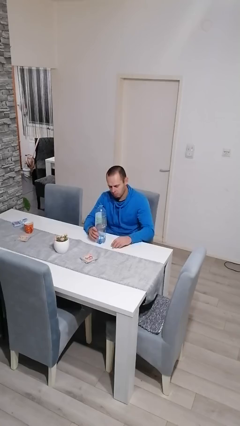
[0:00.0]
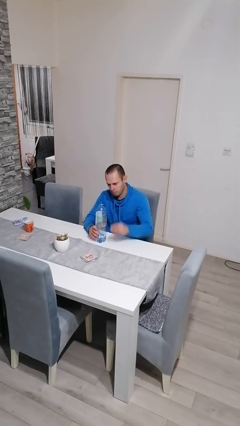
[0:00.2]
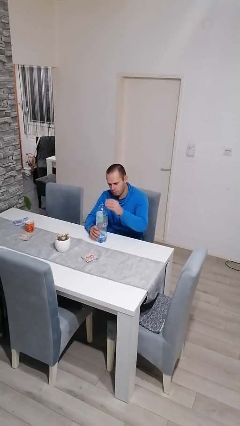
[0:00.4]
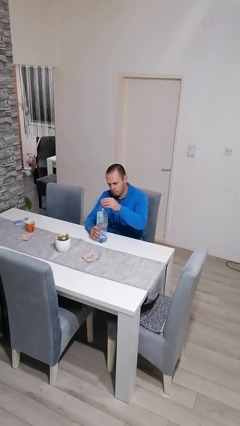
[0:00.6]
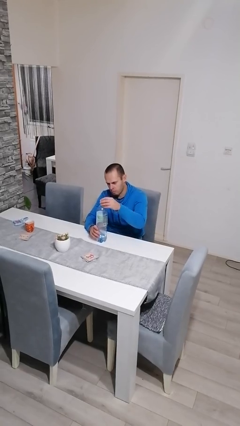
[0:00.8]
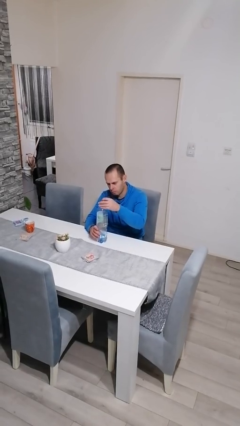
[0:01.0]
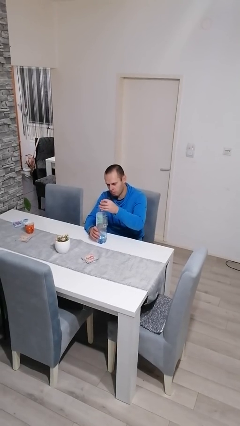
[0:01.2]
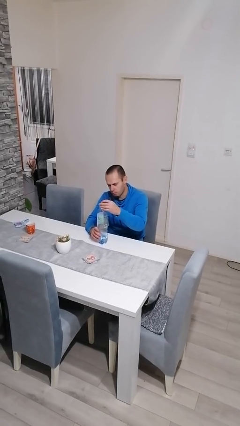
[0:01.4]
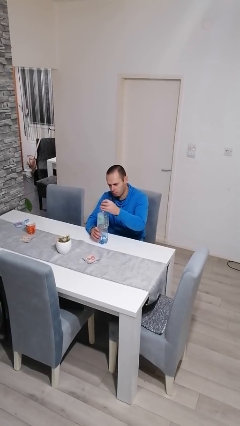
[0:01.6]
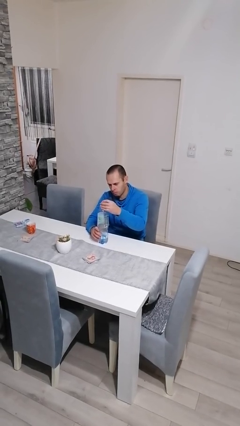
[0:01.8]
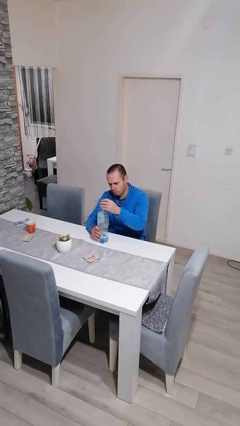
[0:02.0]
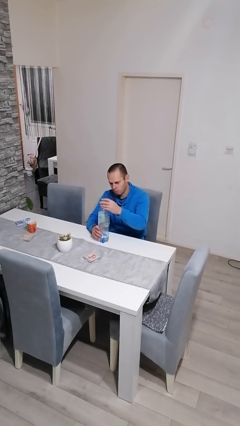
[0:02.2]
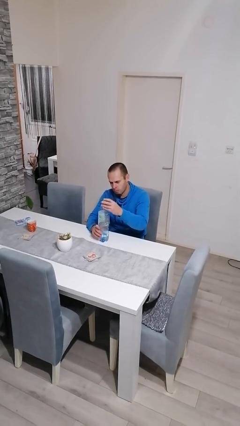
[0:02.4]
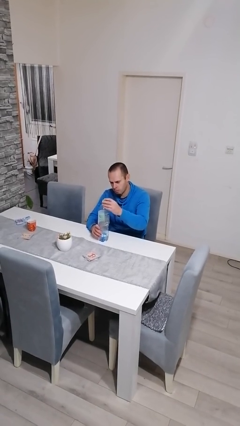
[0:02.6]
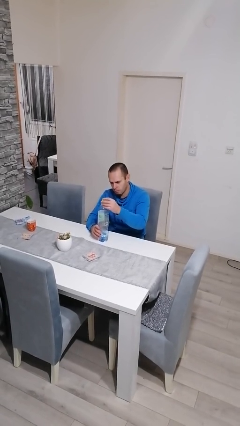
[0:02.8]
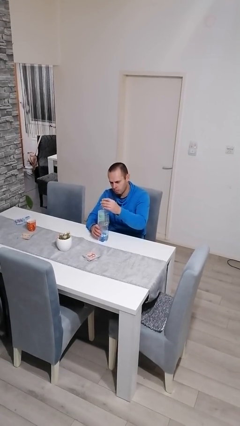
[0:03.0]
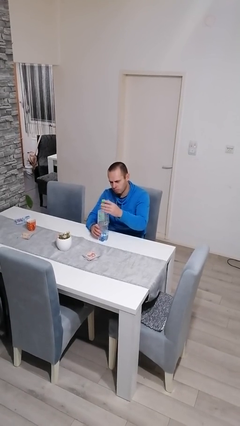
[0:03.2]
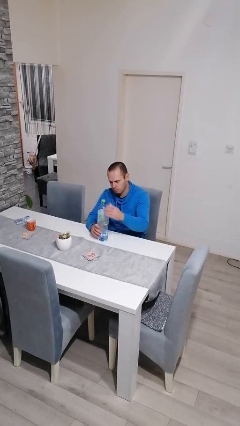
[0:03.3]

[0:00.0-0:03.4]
person screws lid to bottle

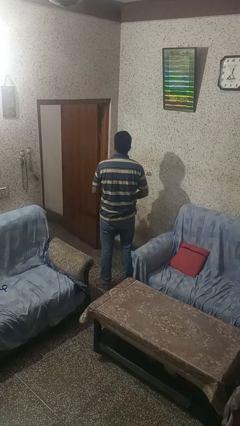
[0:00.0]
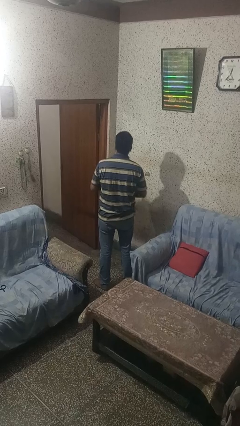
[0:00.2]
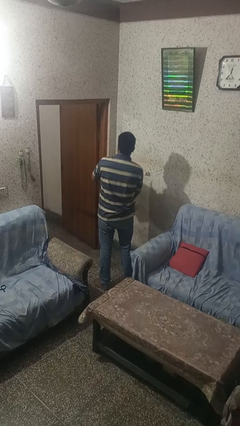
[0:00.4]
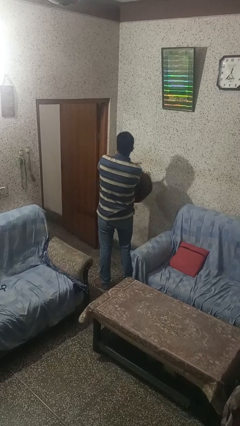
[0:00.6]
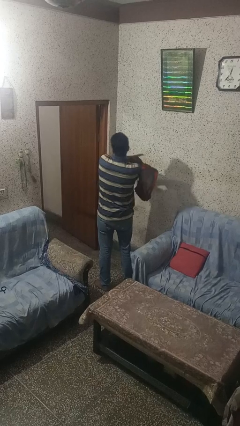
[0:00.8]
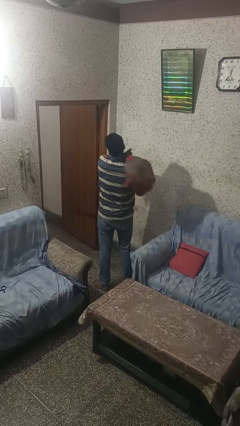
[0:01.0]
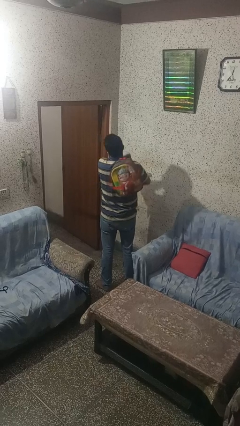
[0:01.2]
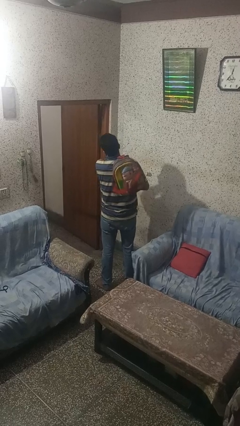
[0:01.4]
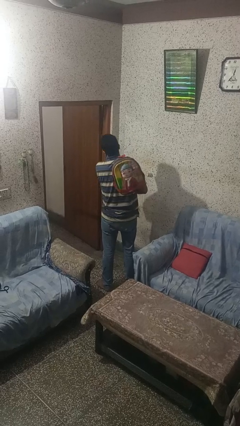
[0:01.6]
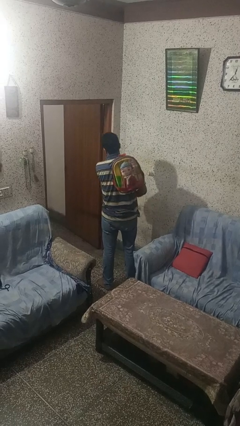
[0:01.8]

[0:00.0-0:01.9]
person puts on backpack

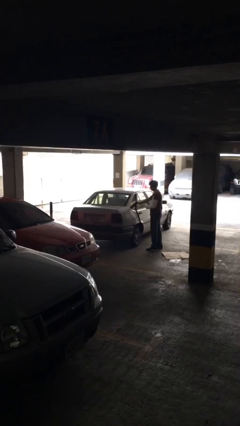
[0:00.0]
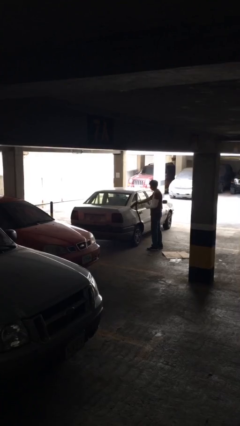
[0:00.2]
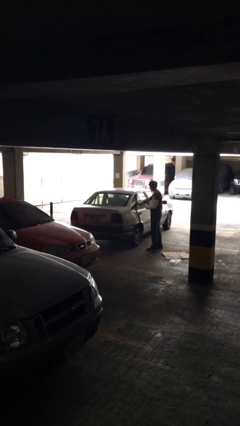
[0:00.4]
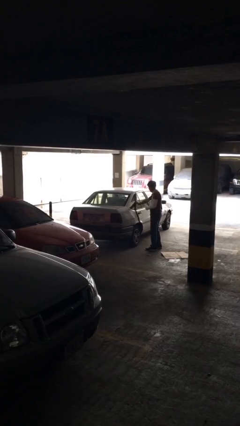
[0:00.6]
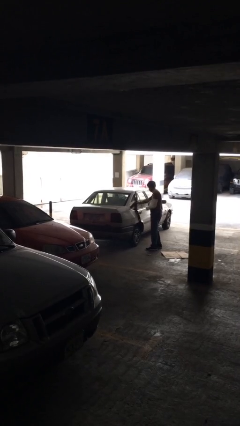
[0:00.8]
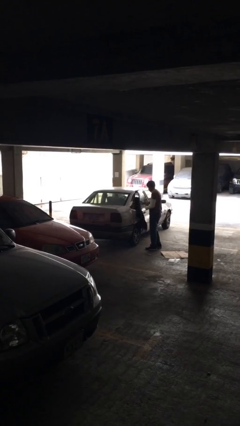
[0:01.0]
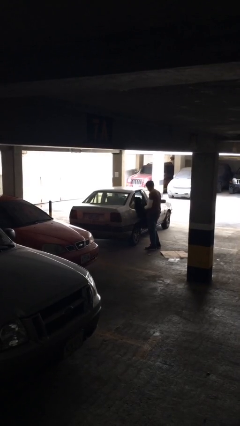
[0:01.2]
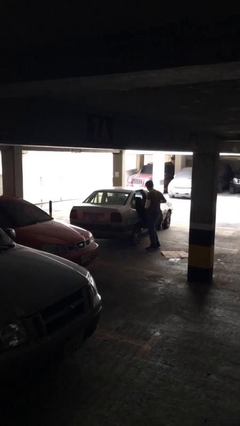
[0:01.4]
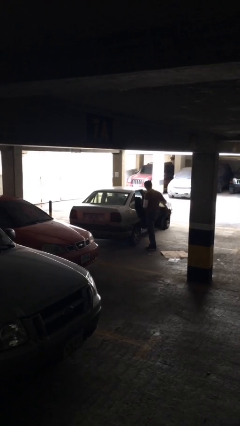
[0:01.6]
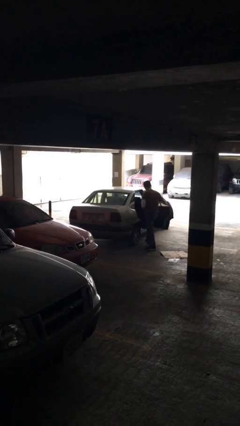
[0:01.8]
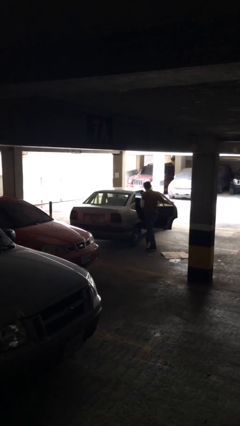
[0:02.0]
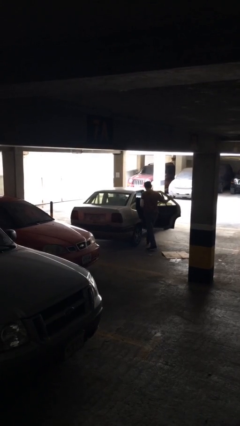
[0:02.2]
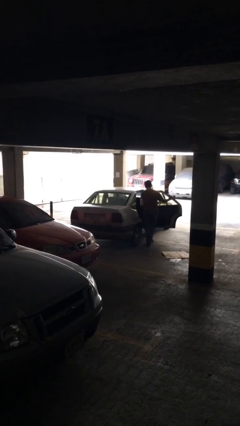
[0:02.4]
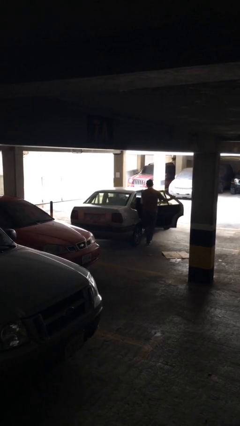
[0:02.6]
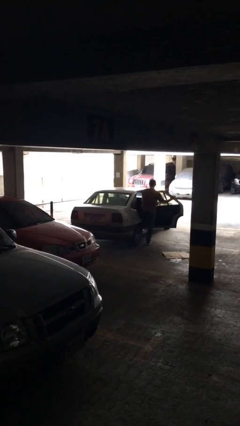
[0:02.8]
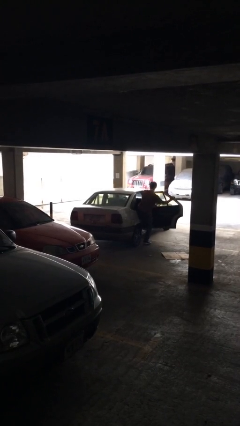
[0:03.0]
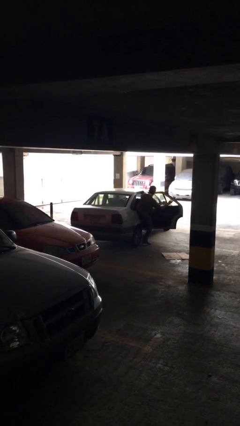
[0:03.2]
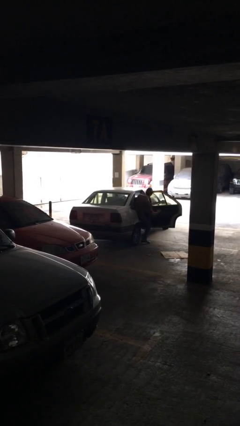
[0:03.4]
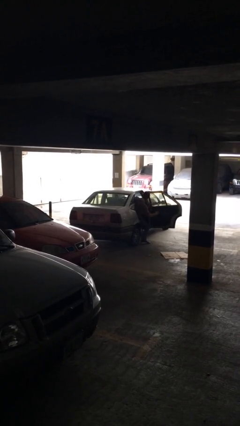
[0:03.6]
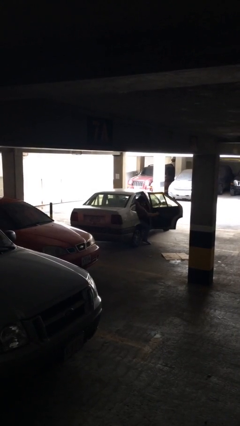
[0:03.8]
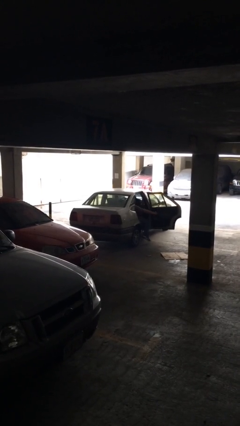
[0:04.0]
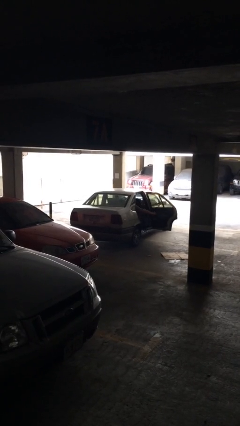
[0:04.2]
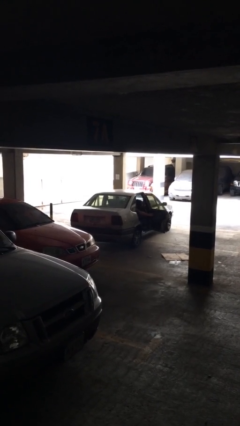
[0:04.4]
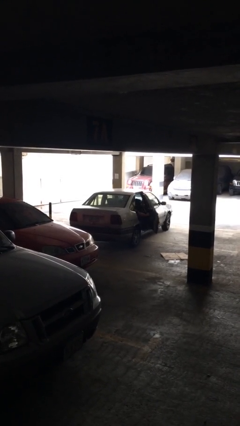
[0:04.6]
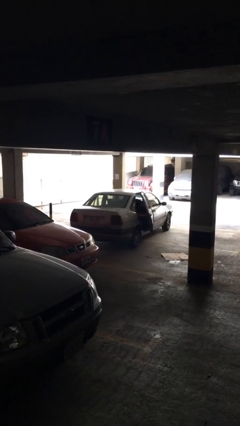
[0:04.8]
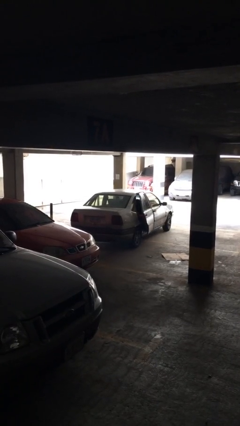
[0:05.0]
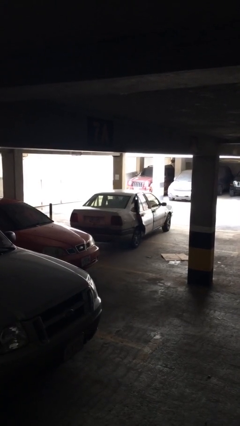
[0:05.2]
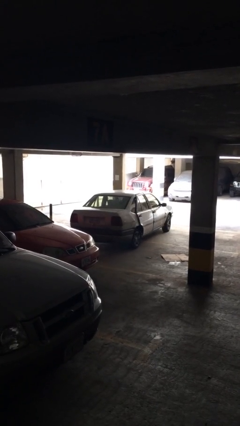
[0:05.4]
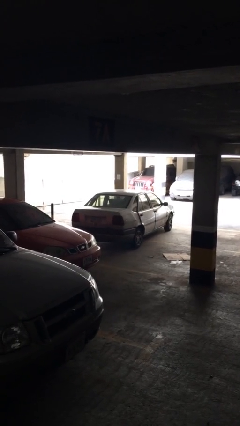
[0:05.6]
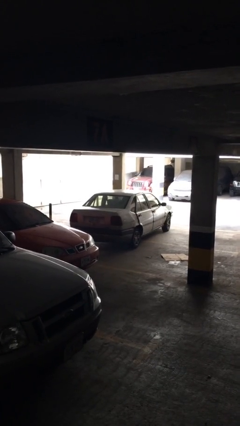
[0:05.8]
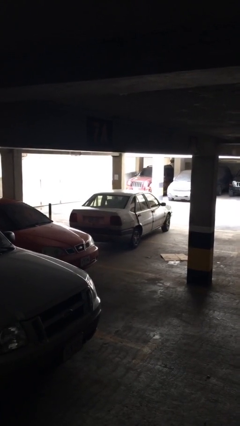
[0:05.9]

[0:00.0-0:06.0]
car picks up person

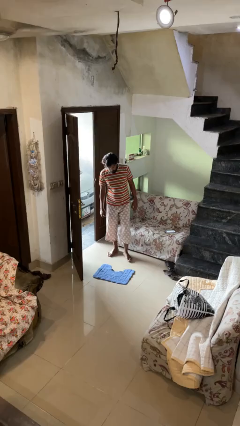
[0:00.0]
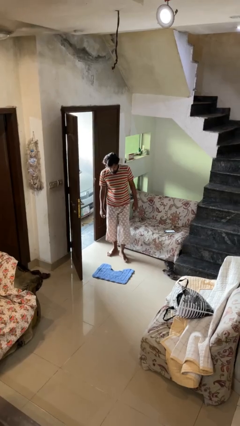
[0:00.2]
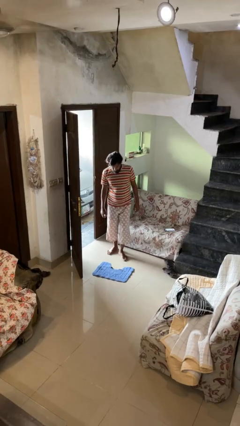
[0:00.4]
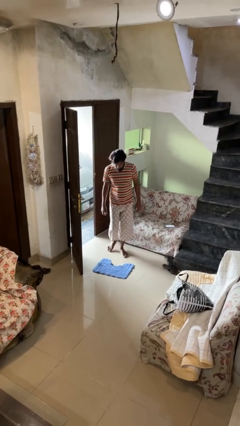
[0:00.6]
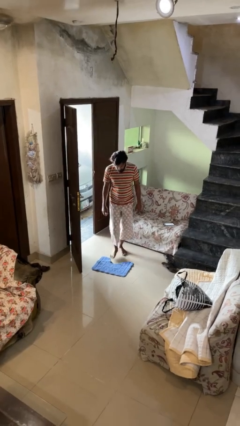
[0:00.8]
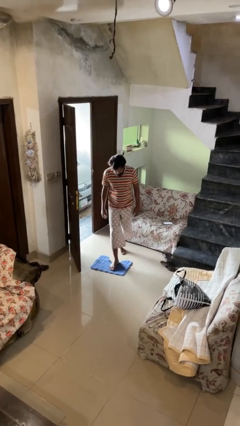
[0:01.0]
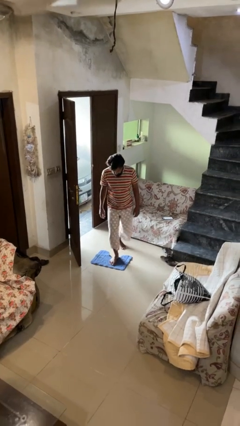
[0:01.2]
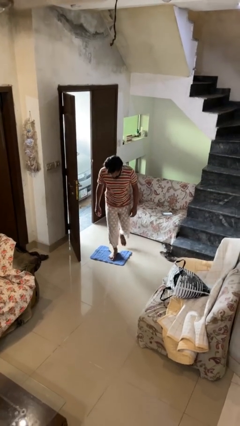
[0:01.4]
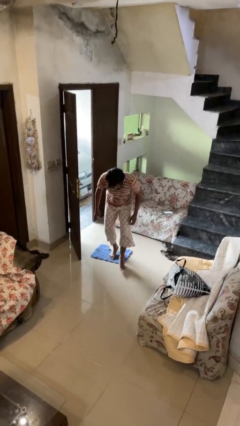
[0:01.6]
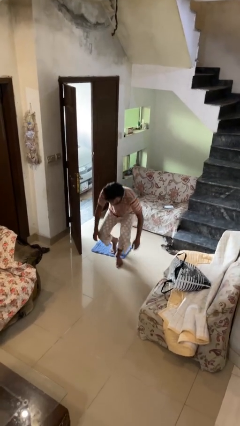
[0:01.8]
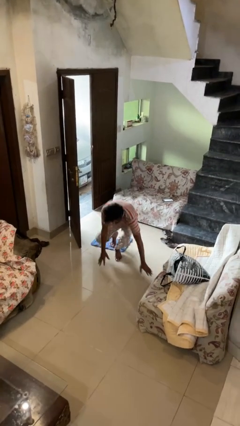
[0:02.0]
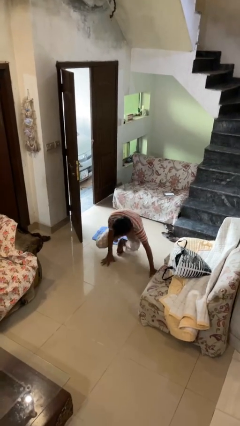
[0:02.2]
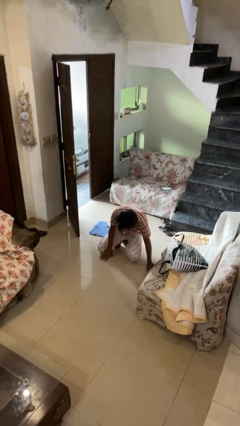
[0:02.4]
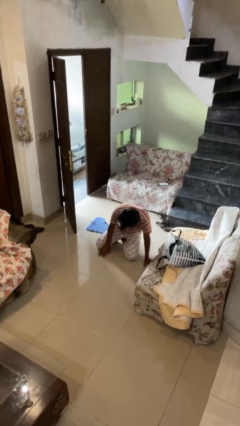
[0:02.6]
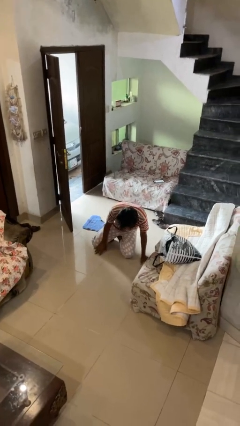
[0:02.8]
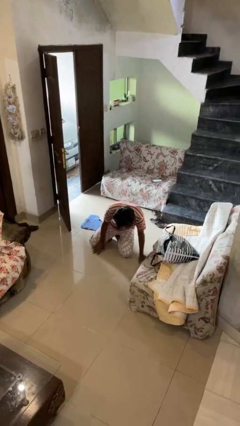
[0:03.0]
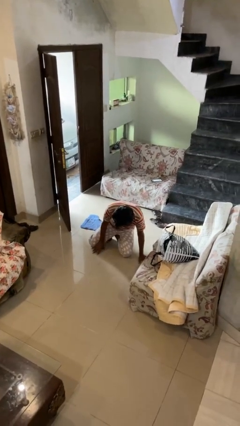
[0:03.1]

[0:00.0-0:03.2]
person trips on object on floor

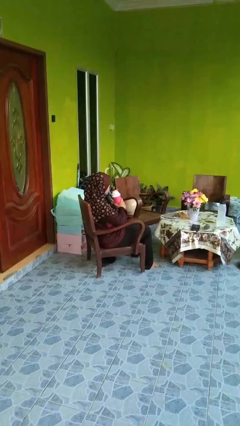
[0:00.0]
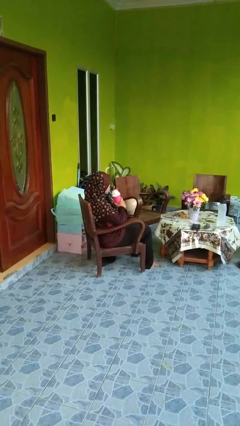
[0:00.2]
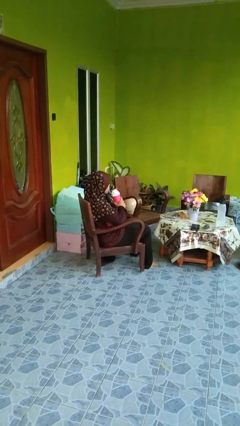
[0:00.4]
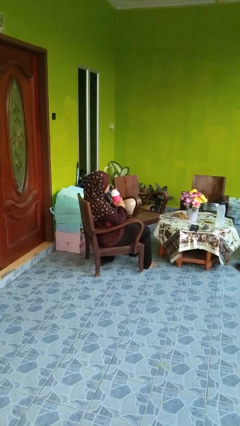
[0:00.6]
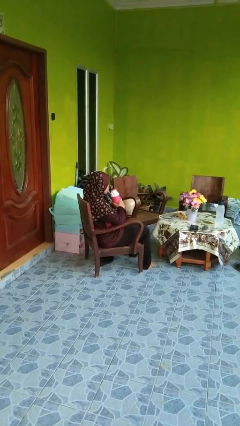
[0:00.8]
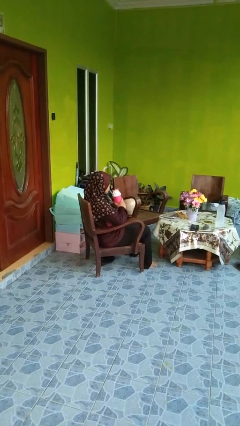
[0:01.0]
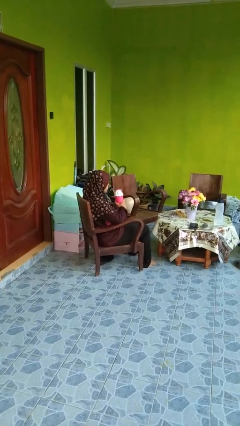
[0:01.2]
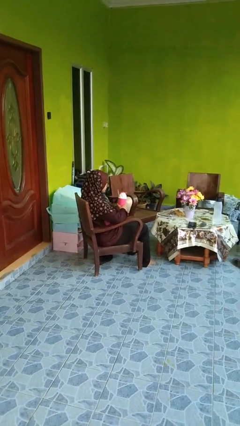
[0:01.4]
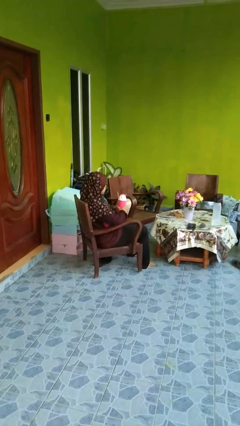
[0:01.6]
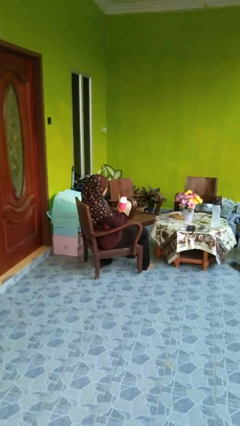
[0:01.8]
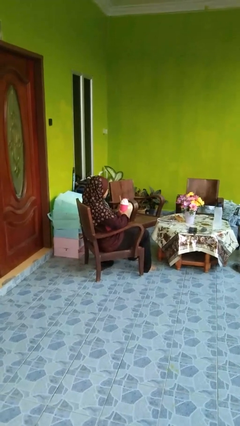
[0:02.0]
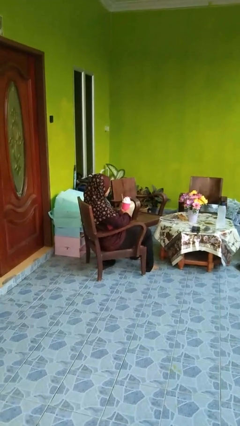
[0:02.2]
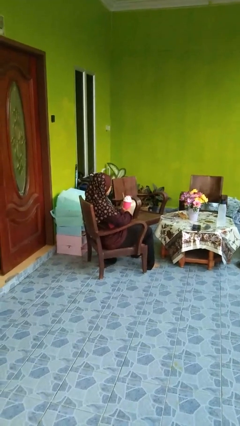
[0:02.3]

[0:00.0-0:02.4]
person drinks from straw

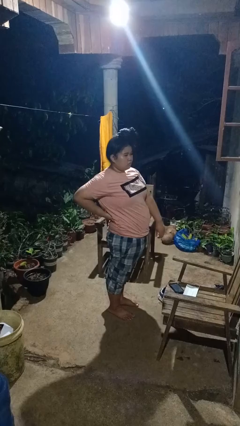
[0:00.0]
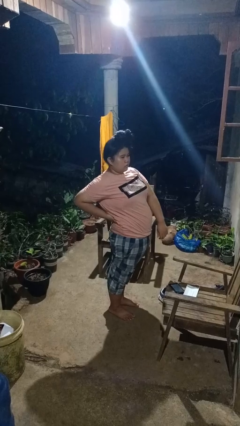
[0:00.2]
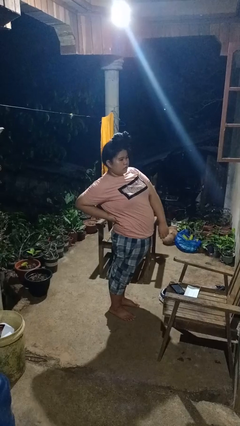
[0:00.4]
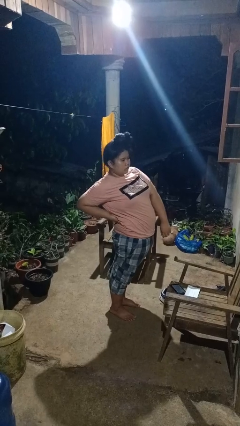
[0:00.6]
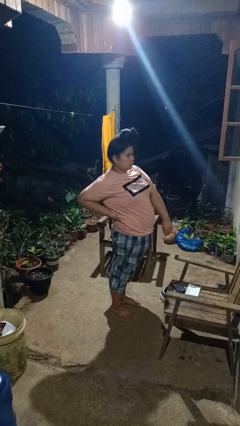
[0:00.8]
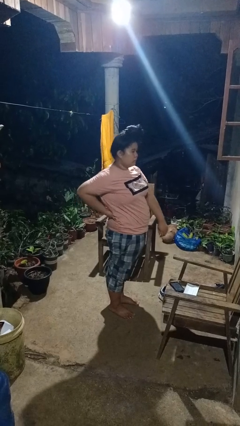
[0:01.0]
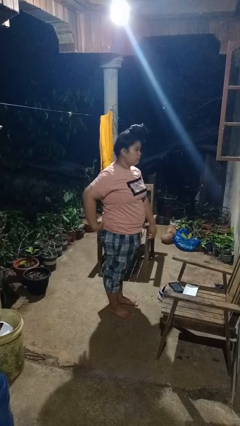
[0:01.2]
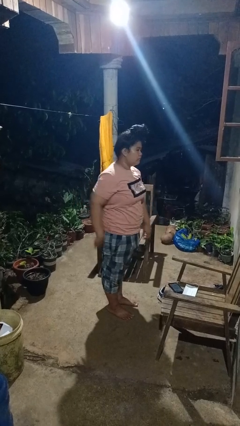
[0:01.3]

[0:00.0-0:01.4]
person stretches back
